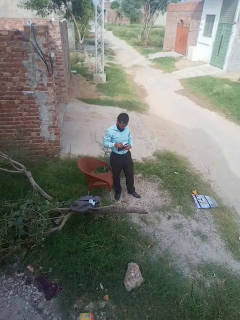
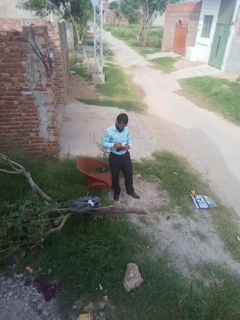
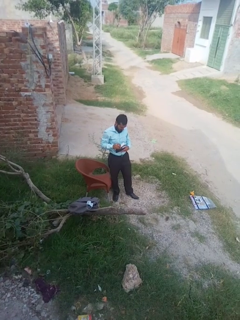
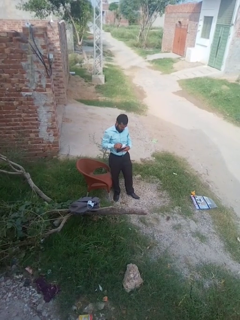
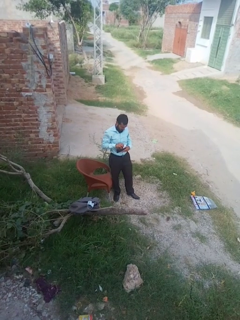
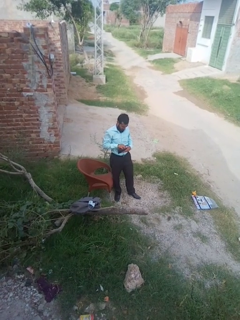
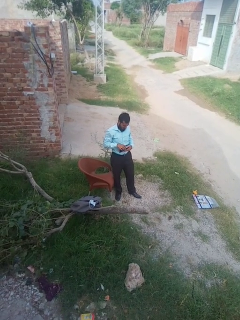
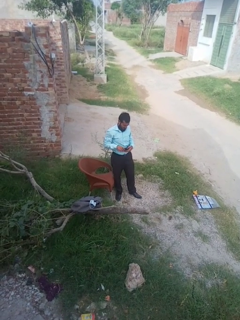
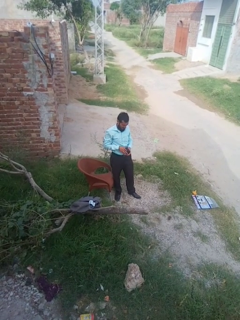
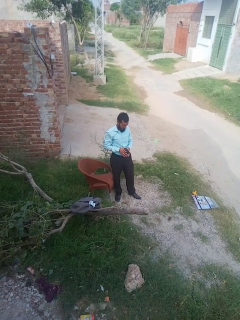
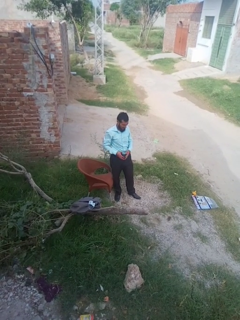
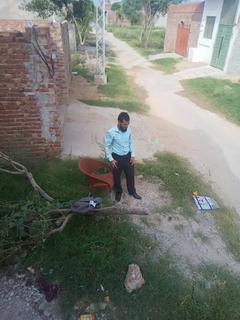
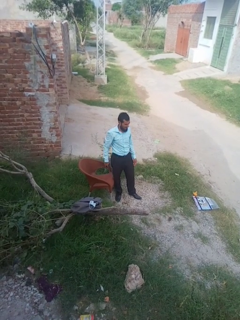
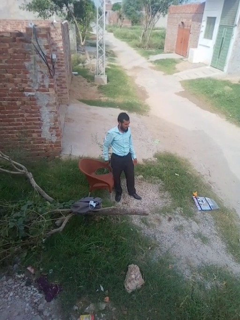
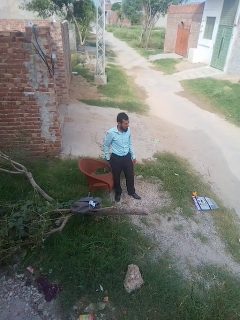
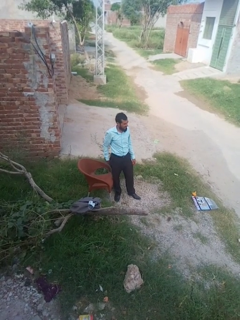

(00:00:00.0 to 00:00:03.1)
person puts object into purse

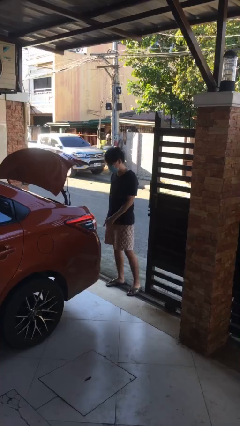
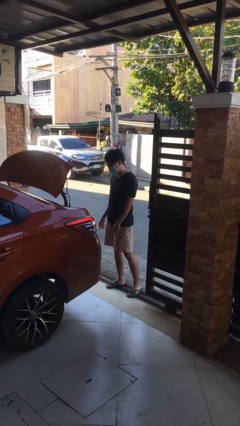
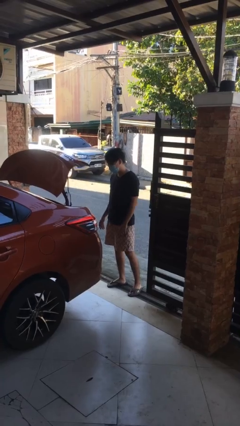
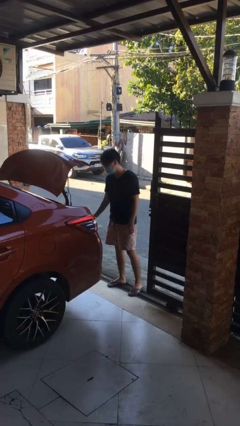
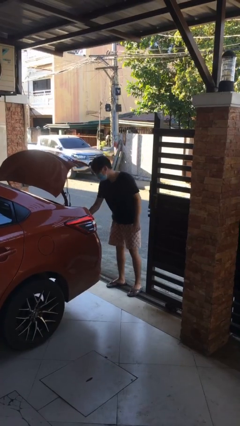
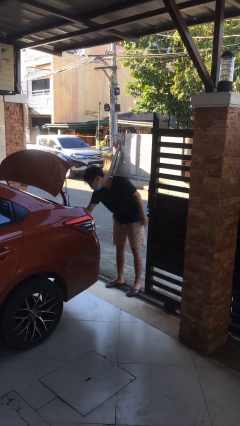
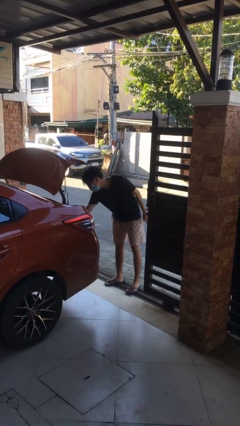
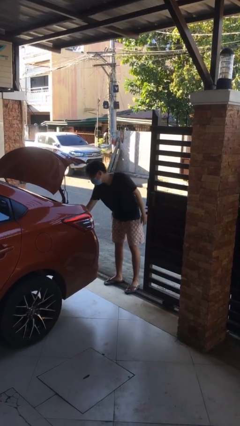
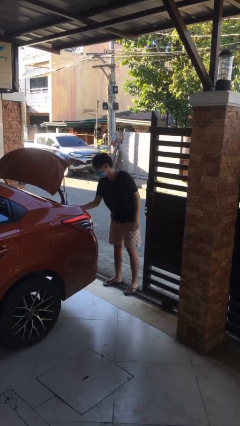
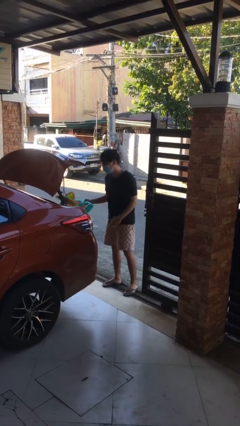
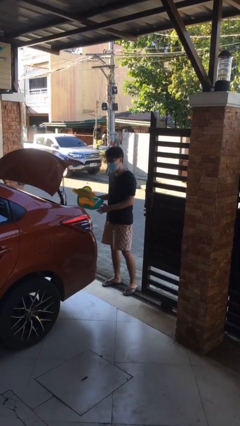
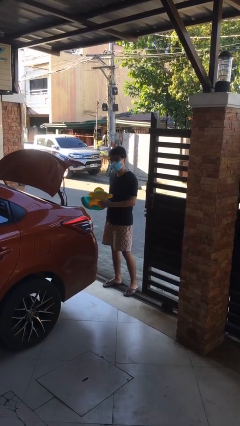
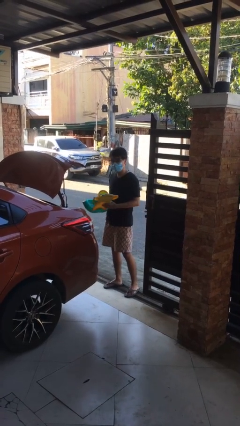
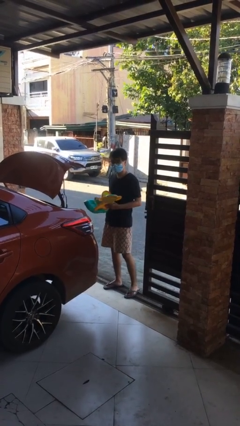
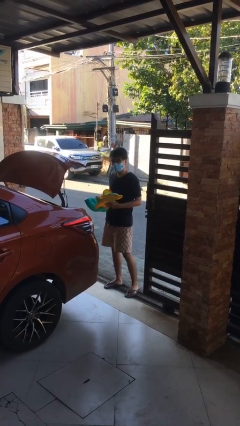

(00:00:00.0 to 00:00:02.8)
person unloads car

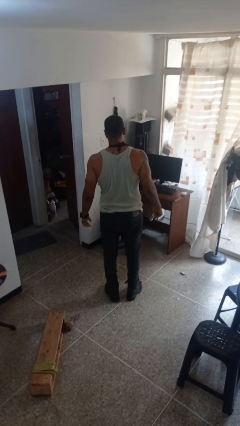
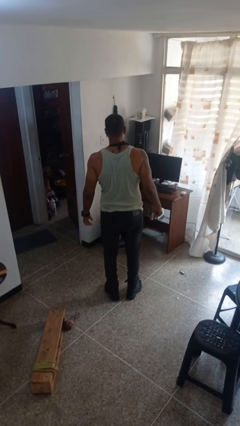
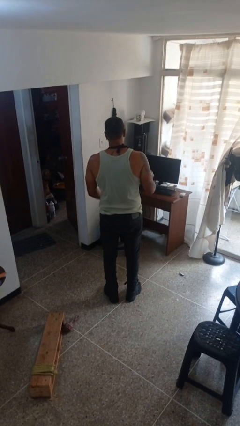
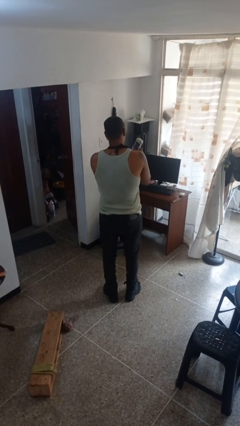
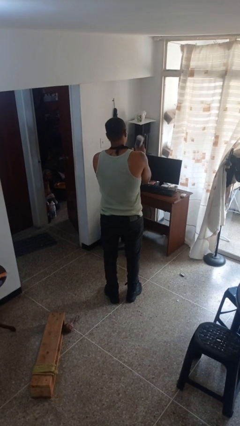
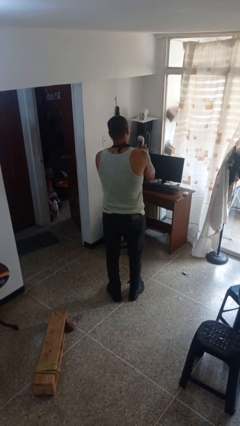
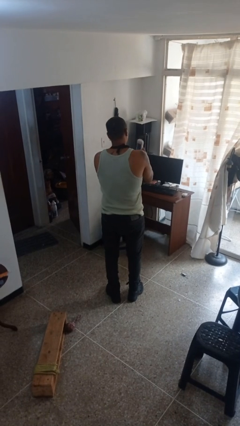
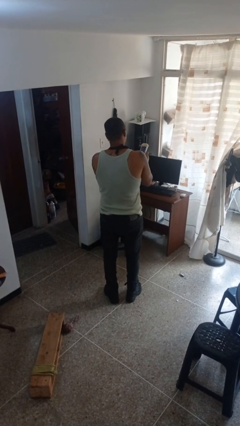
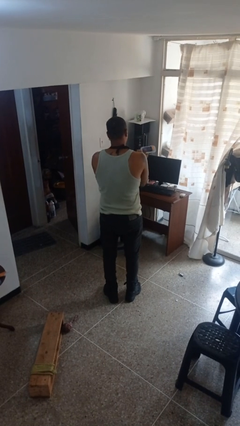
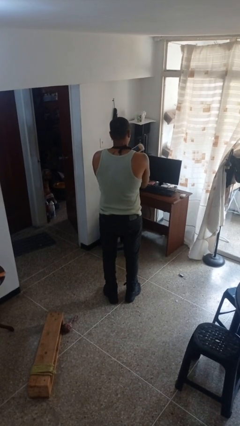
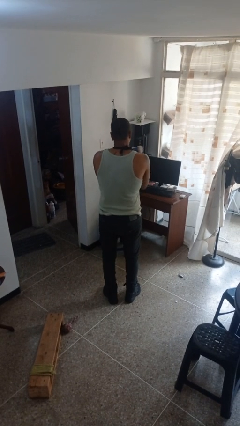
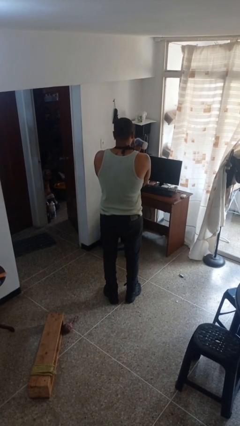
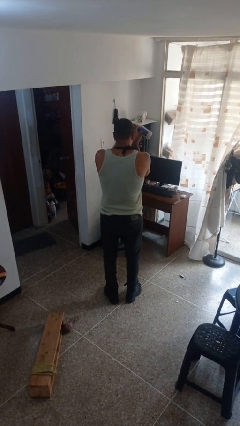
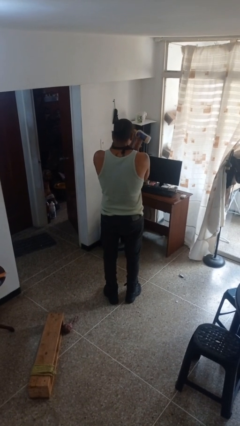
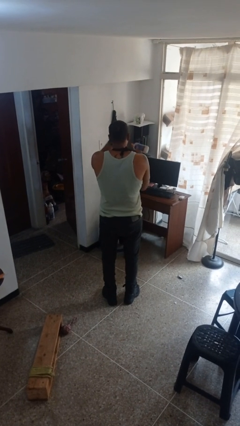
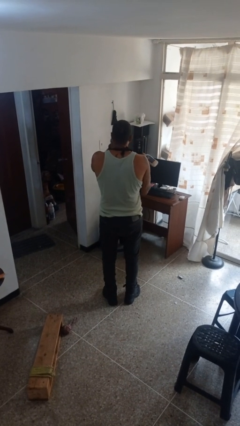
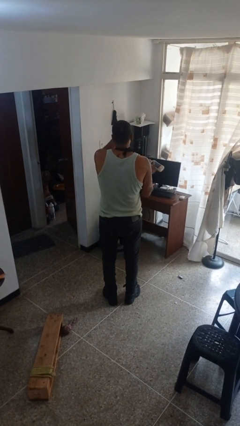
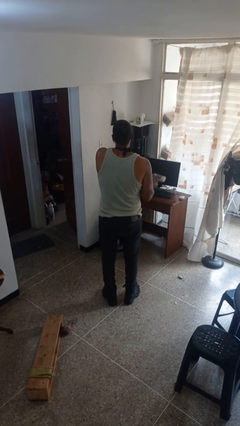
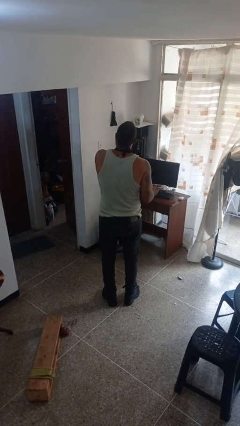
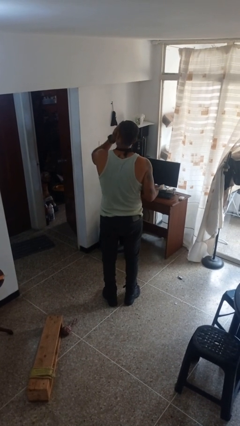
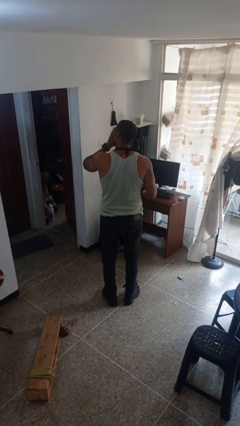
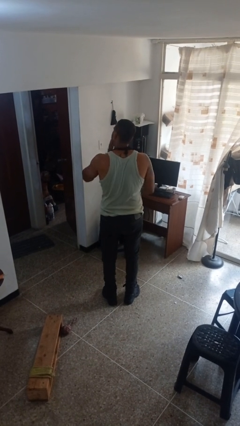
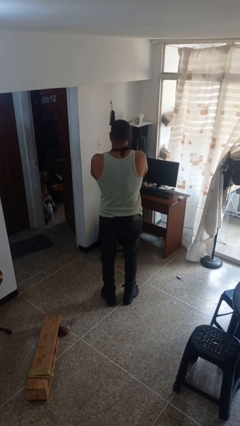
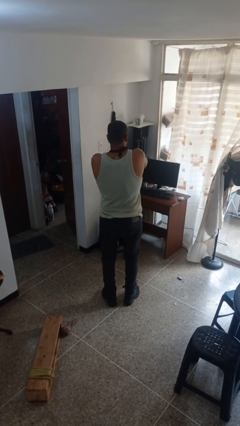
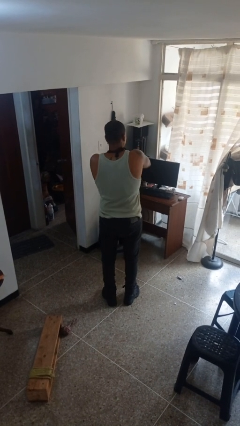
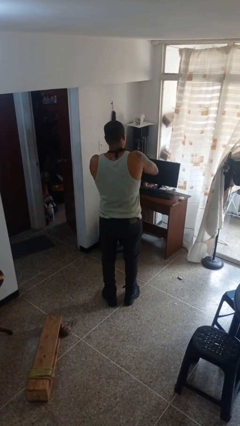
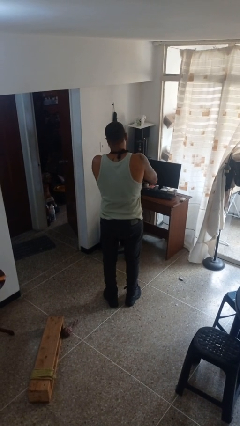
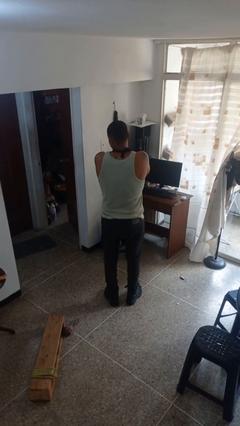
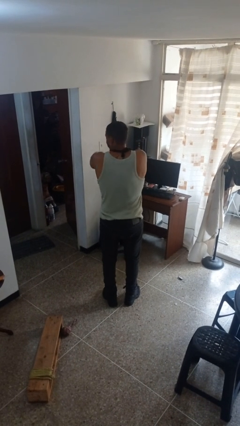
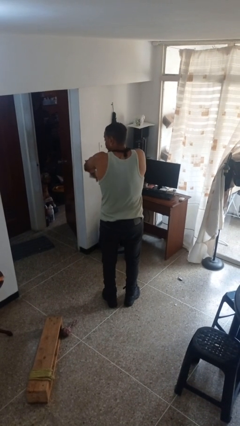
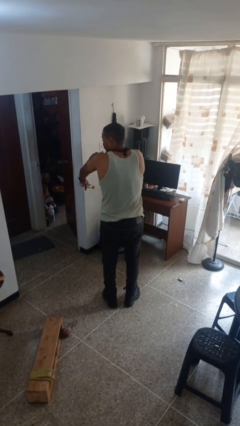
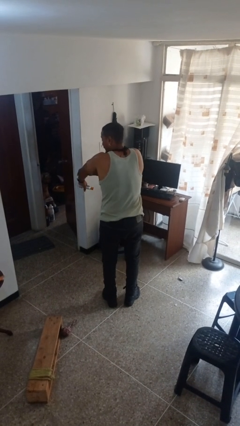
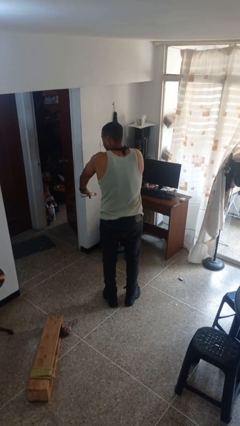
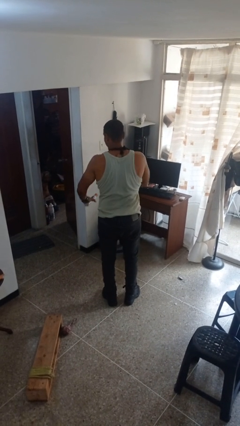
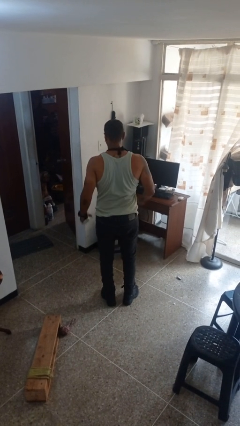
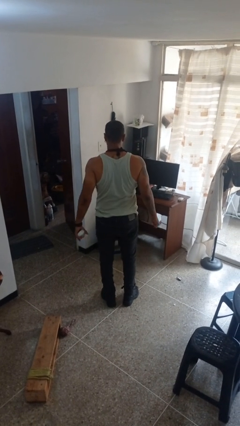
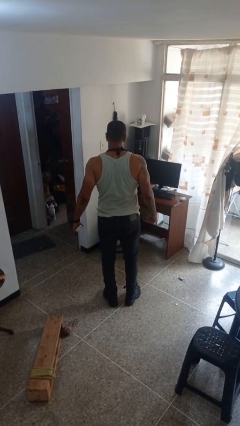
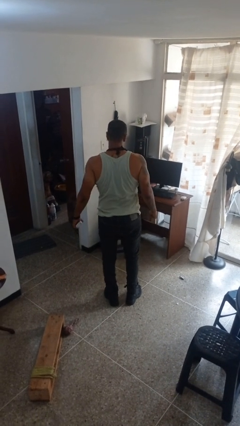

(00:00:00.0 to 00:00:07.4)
person applies sunscreen

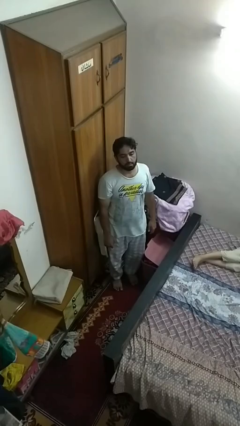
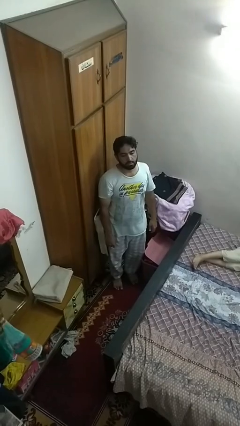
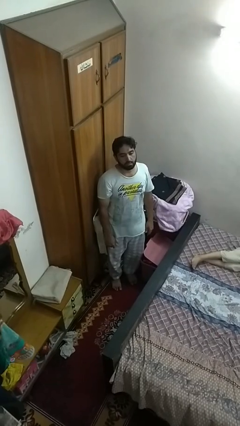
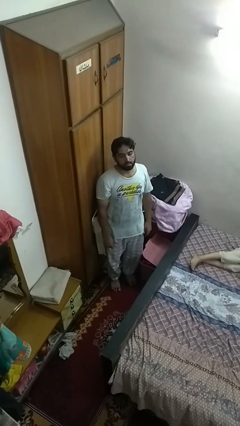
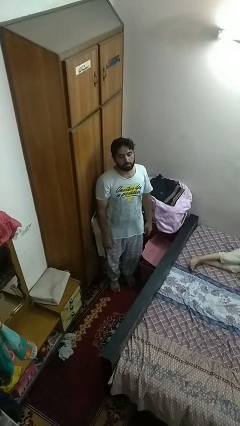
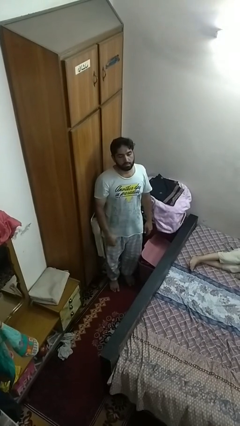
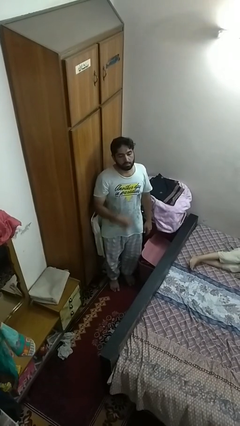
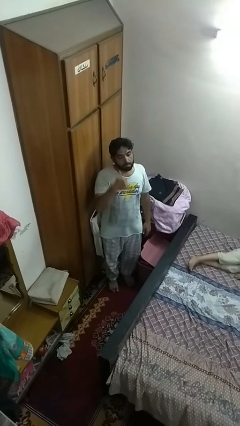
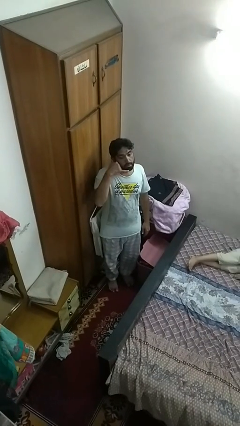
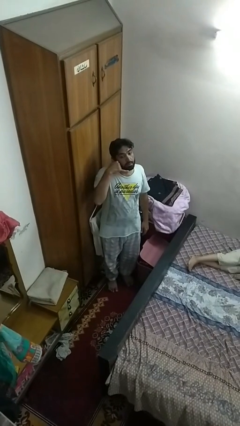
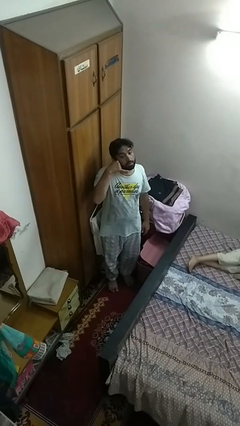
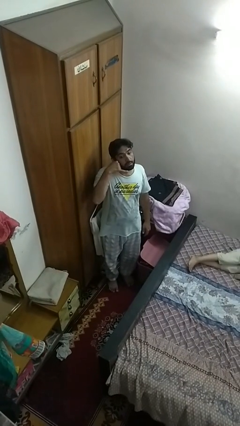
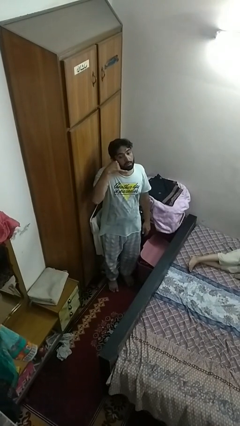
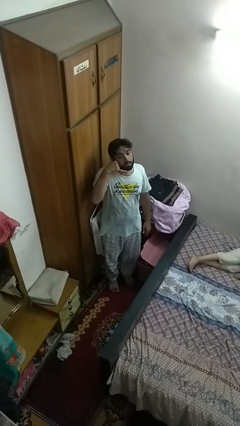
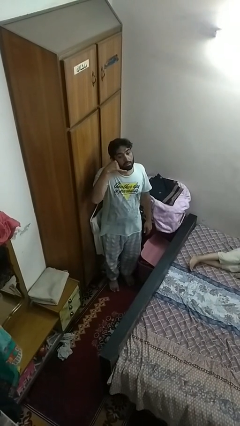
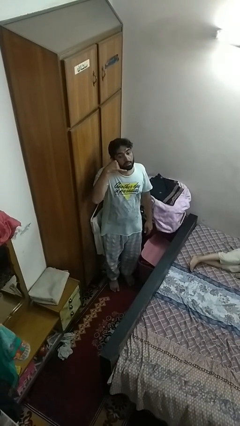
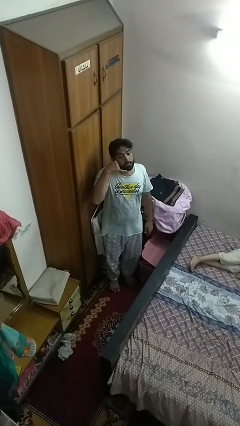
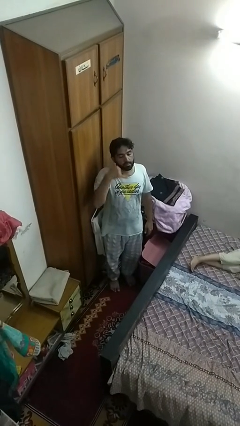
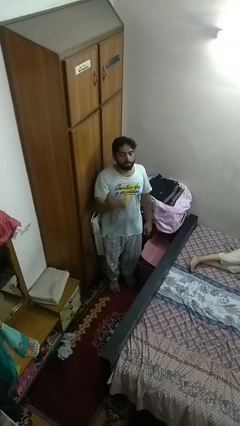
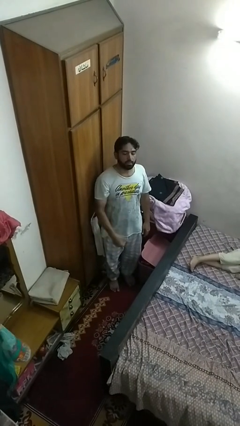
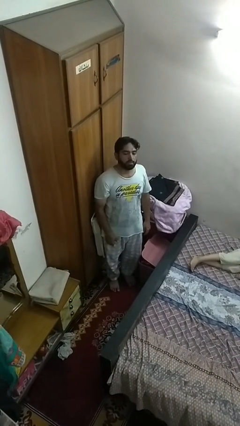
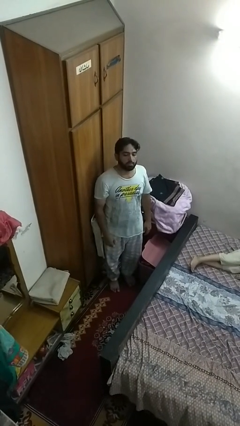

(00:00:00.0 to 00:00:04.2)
person gestures call me

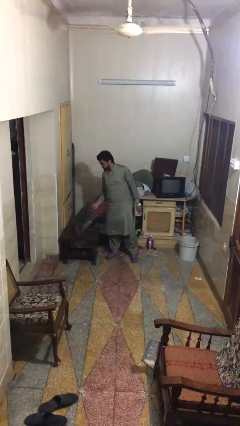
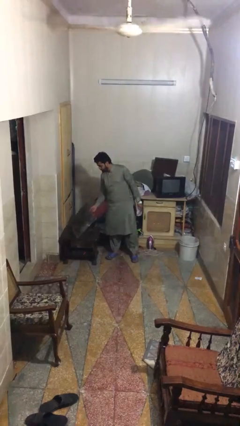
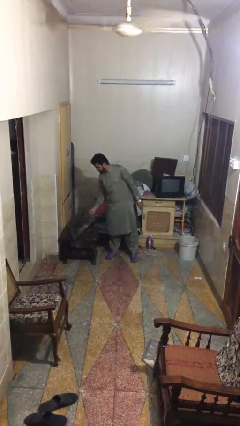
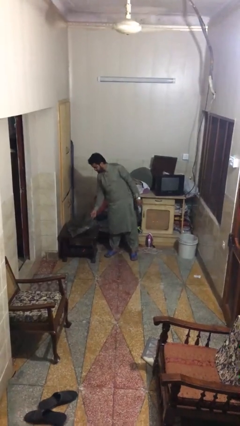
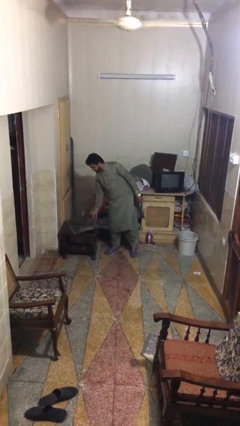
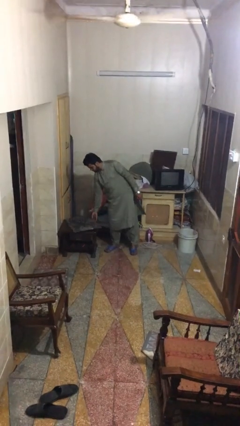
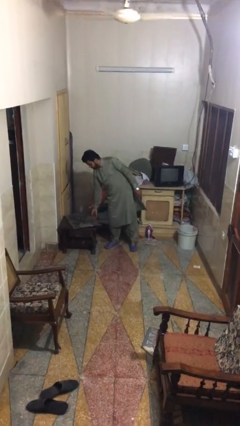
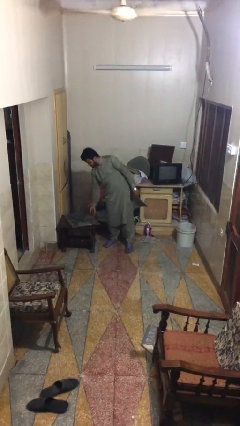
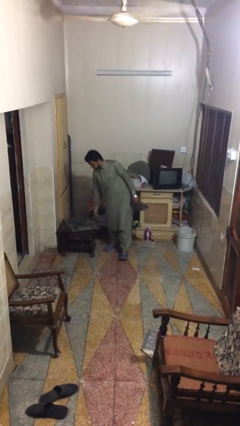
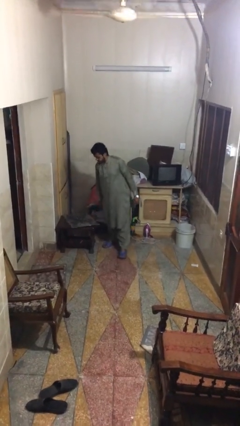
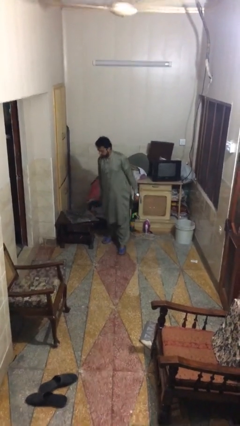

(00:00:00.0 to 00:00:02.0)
person puts down object on table
